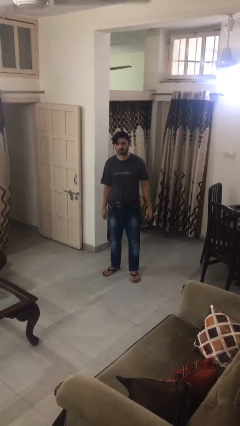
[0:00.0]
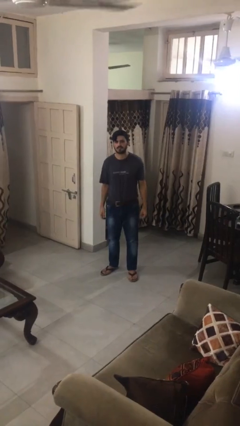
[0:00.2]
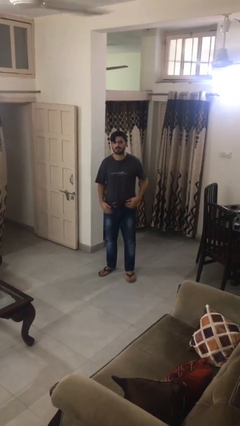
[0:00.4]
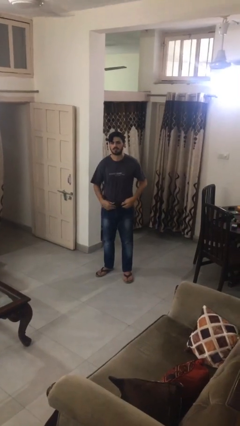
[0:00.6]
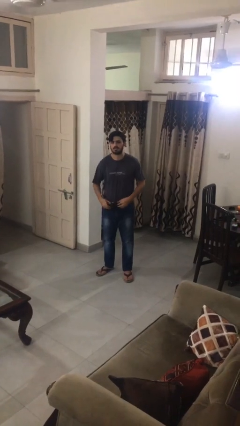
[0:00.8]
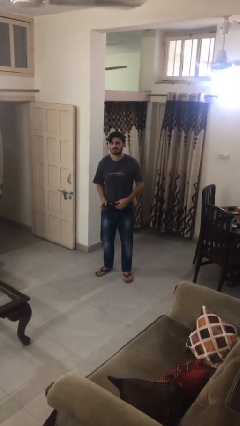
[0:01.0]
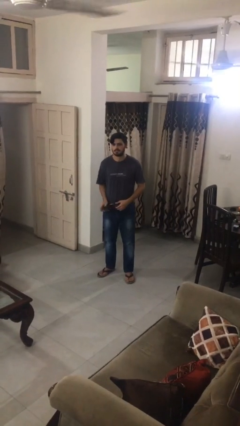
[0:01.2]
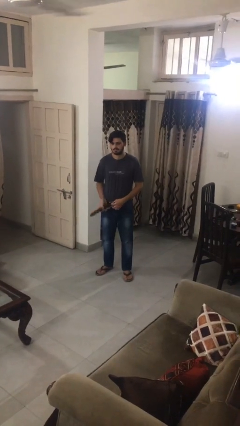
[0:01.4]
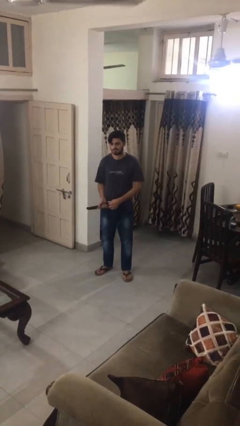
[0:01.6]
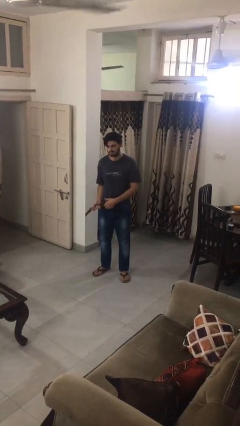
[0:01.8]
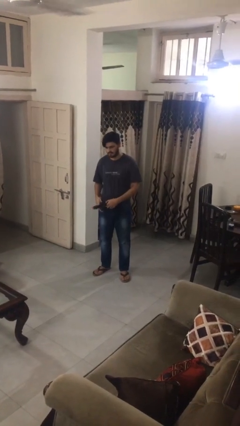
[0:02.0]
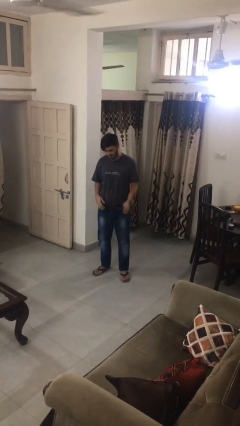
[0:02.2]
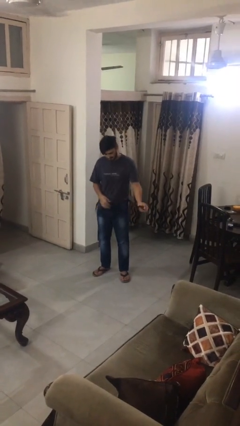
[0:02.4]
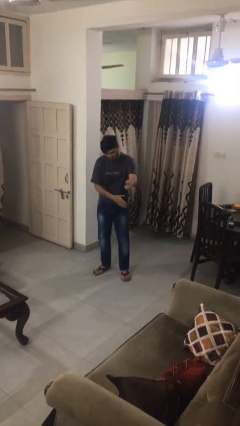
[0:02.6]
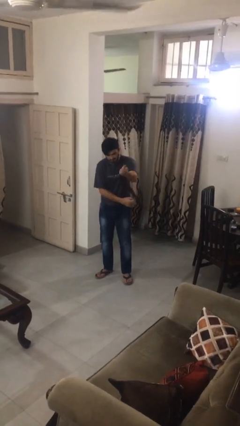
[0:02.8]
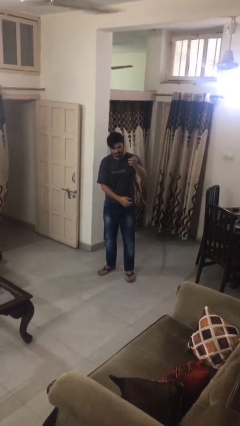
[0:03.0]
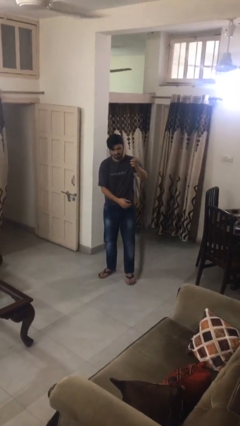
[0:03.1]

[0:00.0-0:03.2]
person takes off belt

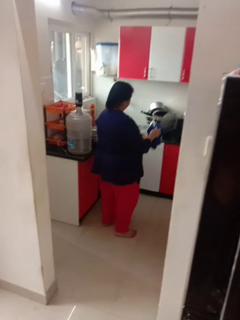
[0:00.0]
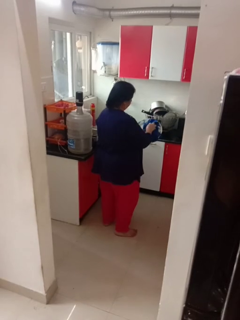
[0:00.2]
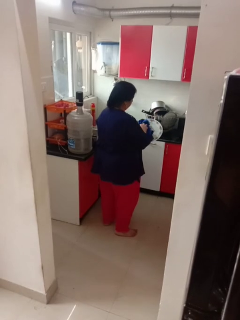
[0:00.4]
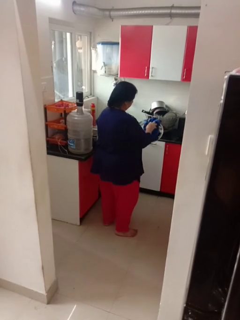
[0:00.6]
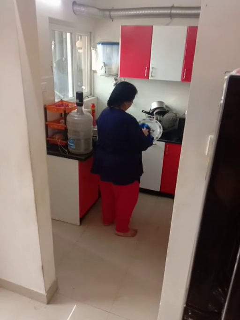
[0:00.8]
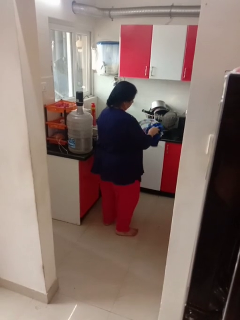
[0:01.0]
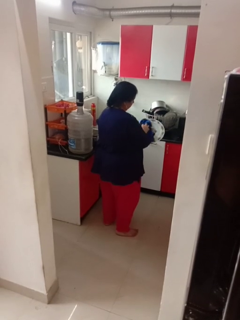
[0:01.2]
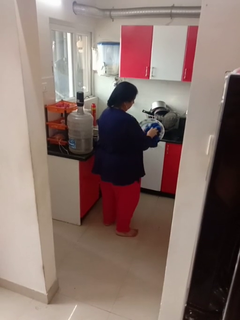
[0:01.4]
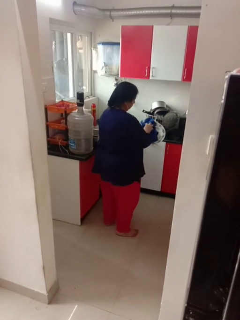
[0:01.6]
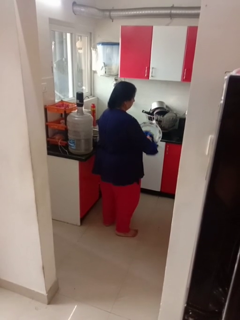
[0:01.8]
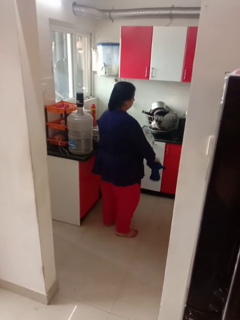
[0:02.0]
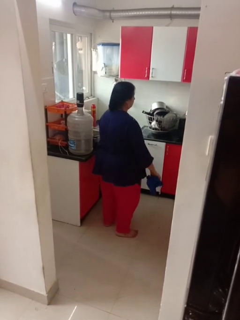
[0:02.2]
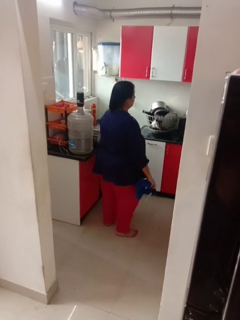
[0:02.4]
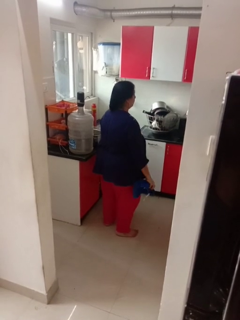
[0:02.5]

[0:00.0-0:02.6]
person dries dish

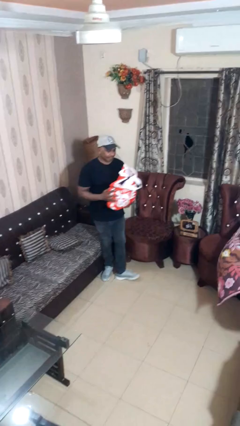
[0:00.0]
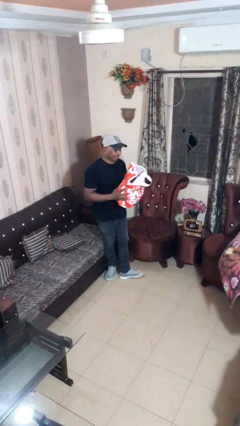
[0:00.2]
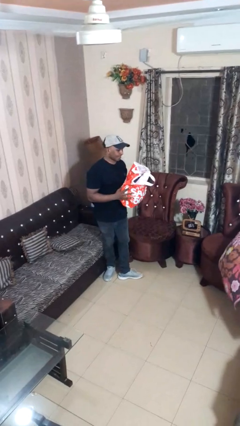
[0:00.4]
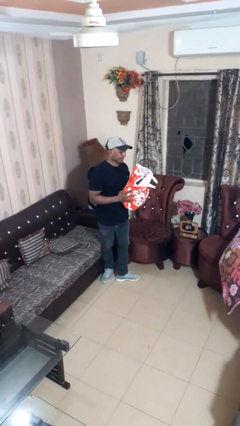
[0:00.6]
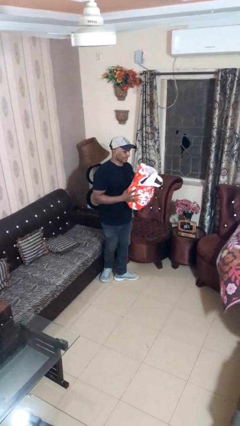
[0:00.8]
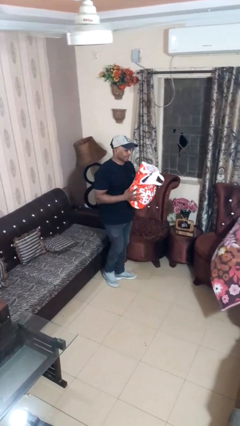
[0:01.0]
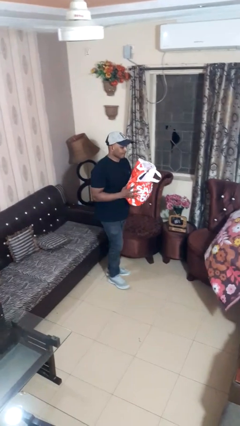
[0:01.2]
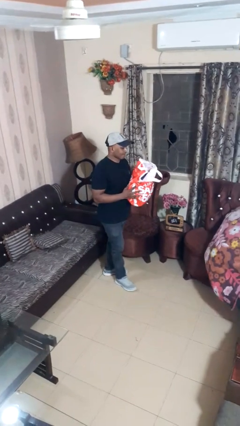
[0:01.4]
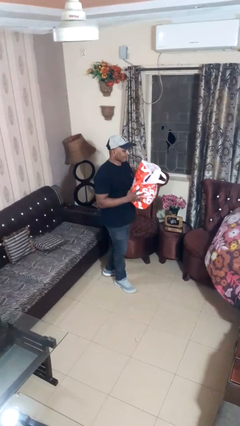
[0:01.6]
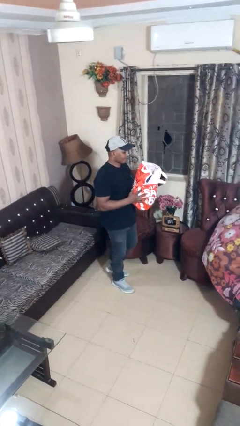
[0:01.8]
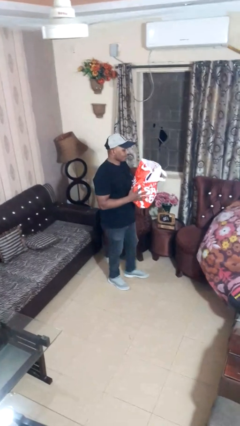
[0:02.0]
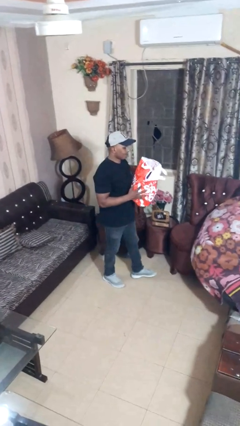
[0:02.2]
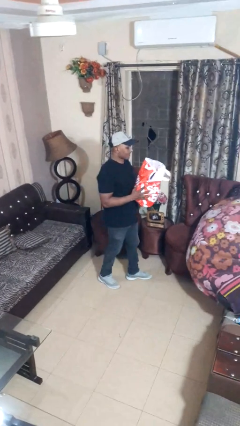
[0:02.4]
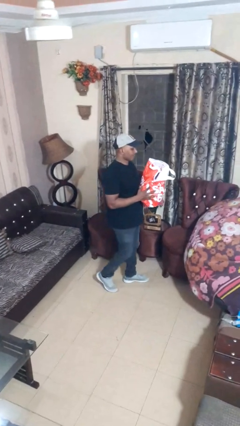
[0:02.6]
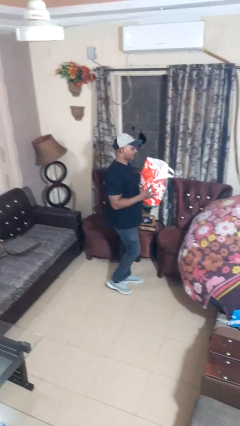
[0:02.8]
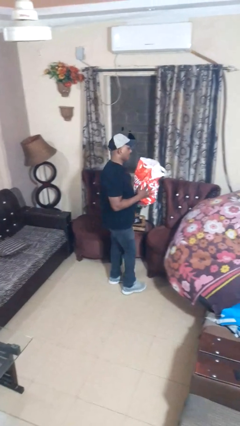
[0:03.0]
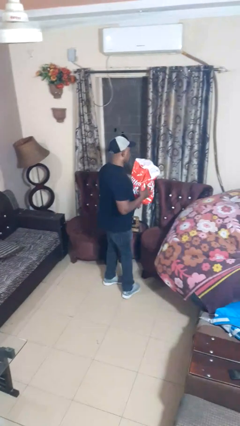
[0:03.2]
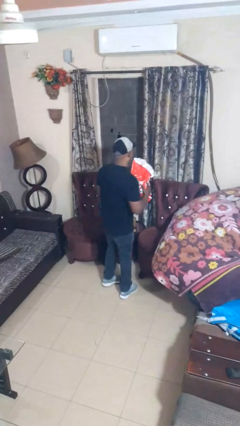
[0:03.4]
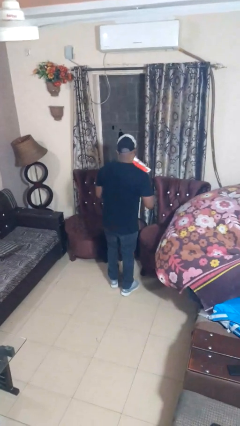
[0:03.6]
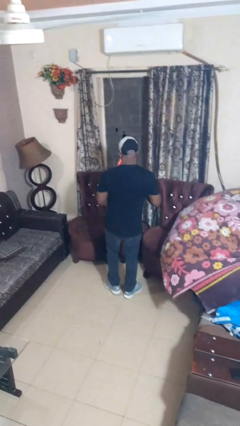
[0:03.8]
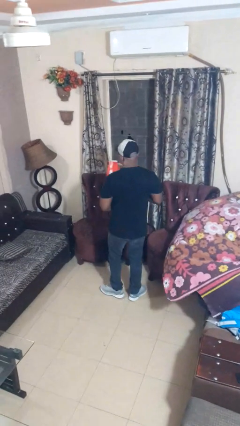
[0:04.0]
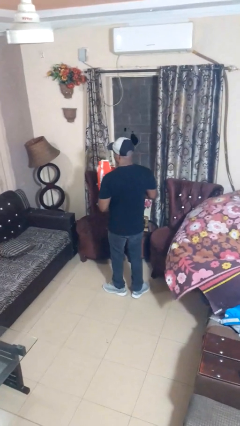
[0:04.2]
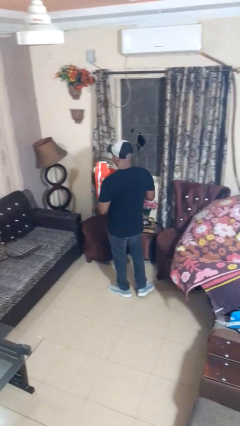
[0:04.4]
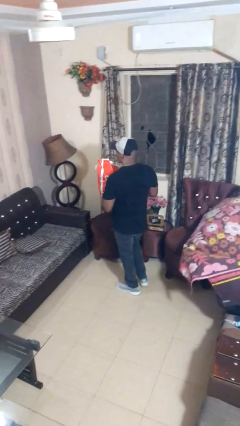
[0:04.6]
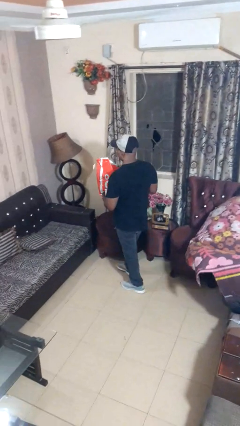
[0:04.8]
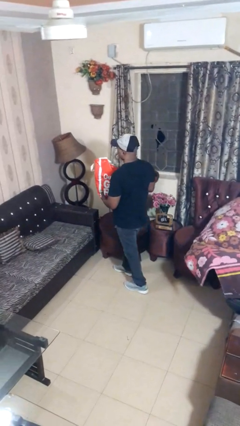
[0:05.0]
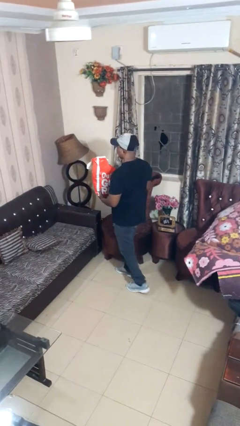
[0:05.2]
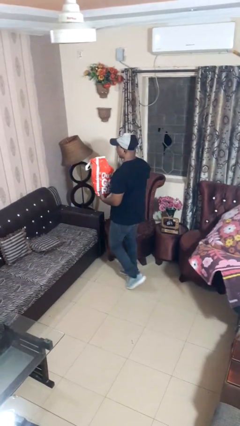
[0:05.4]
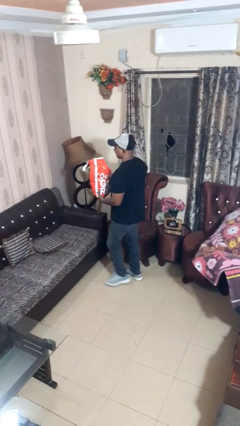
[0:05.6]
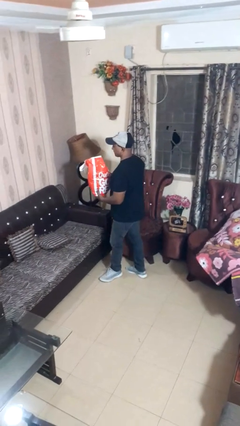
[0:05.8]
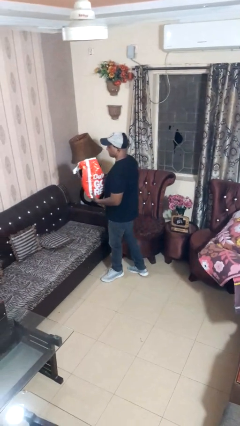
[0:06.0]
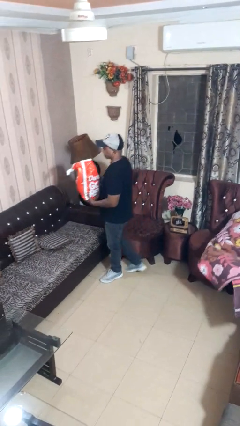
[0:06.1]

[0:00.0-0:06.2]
person carries groceries

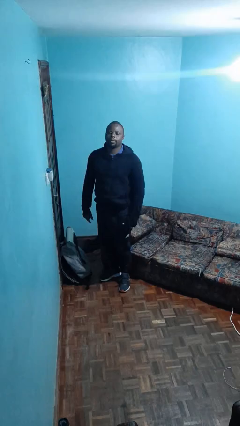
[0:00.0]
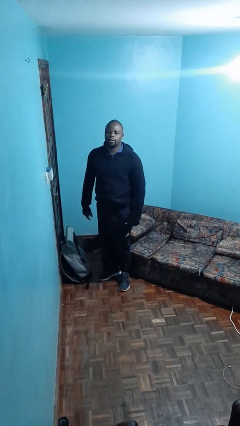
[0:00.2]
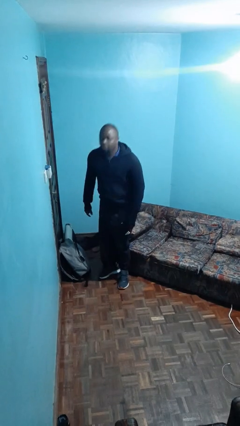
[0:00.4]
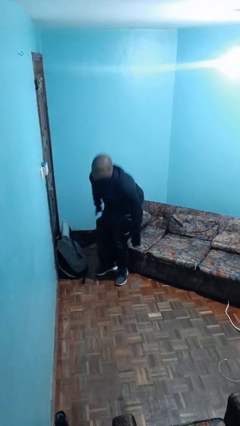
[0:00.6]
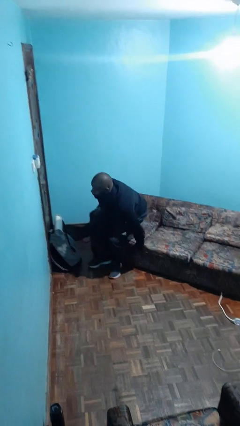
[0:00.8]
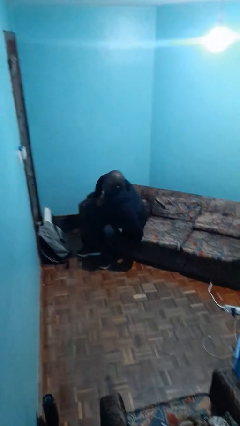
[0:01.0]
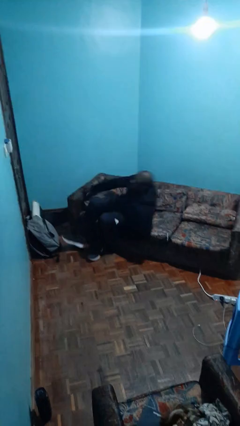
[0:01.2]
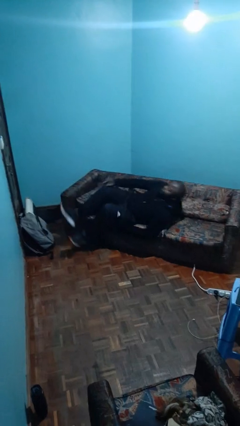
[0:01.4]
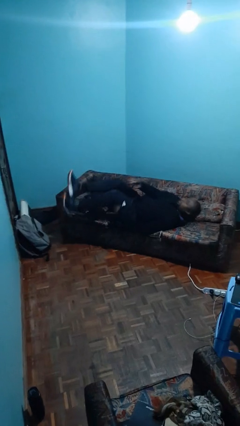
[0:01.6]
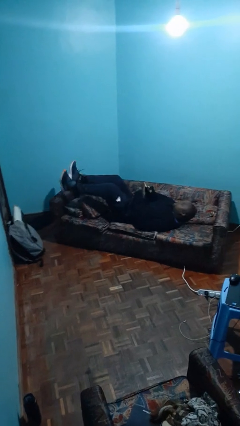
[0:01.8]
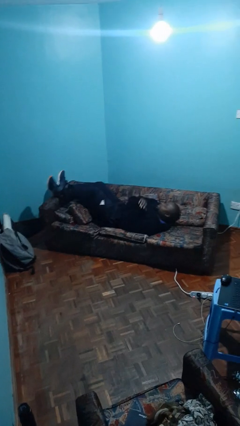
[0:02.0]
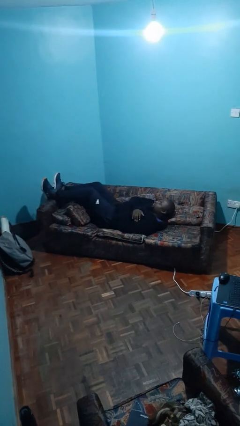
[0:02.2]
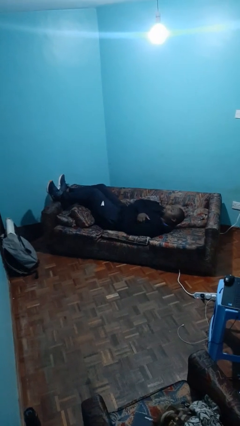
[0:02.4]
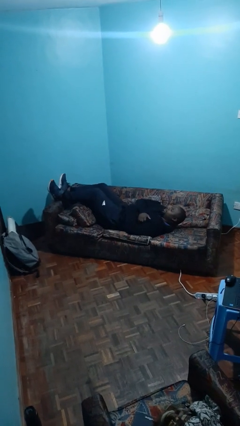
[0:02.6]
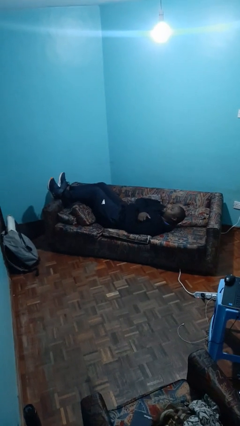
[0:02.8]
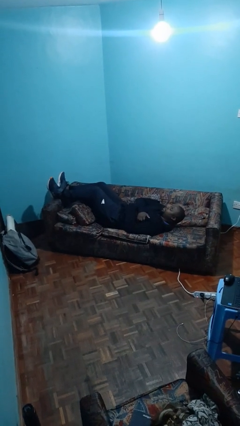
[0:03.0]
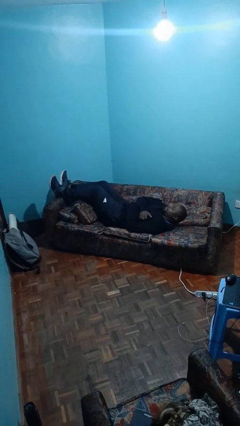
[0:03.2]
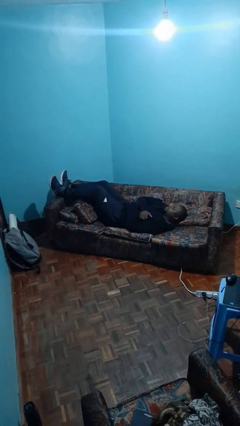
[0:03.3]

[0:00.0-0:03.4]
person lies down on couch

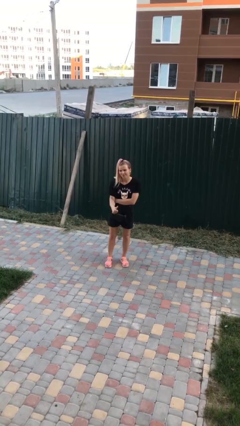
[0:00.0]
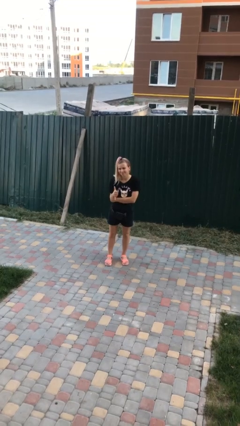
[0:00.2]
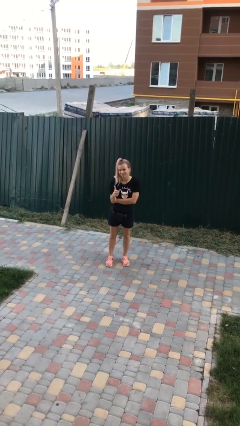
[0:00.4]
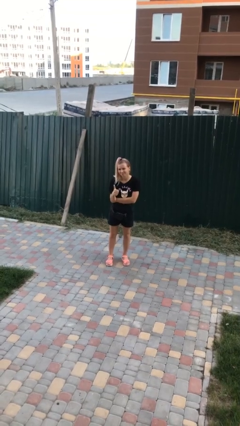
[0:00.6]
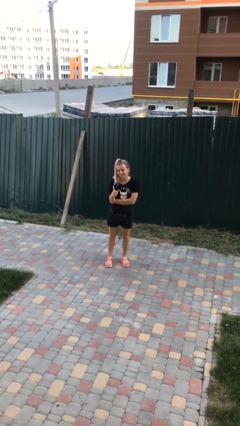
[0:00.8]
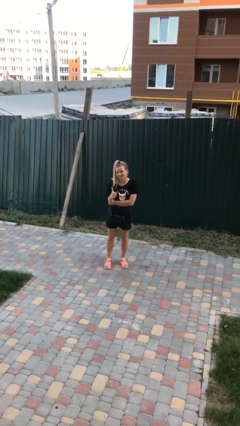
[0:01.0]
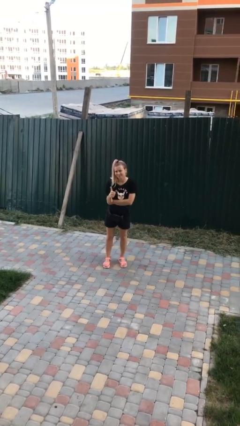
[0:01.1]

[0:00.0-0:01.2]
person gestures thumbs up

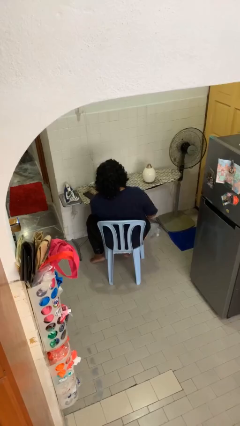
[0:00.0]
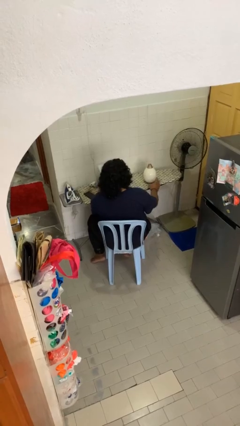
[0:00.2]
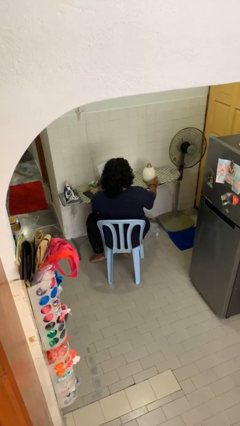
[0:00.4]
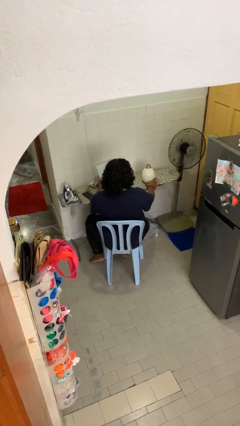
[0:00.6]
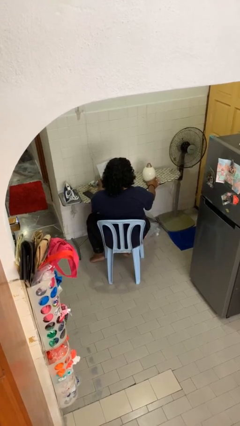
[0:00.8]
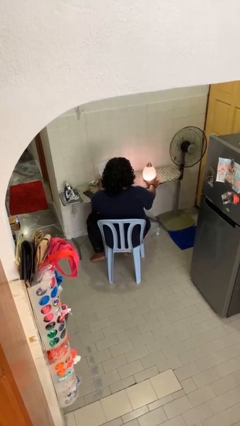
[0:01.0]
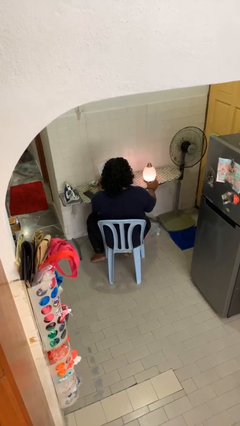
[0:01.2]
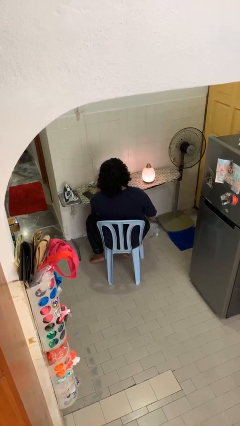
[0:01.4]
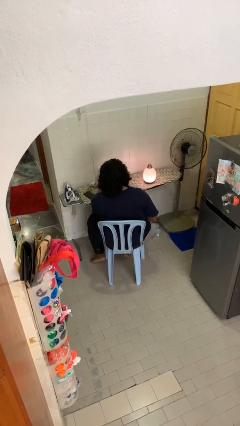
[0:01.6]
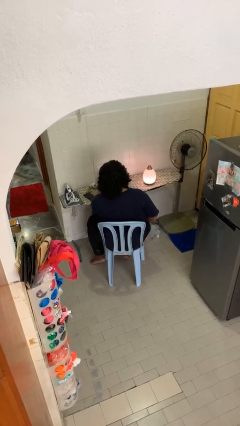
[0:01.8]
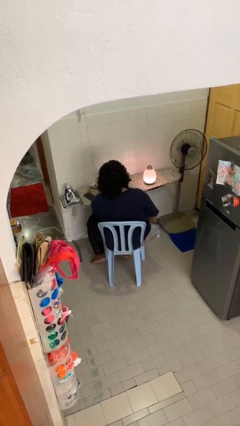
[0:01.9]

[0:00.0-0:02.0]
person turns on lamp
